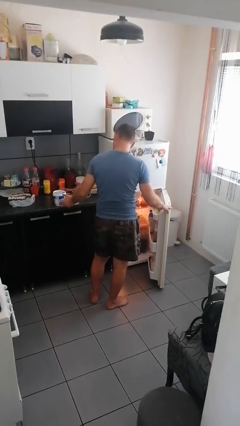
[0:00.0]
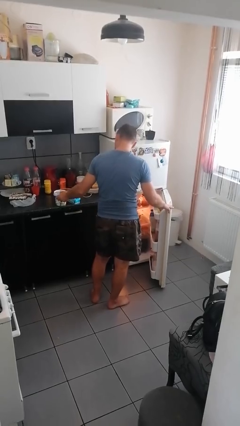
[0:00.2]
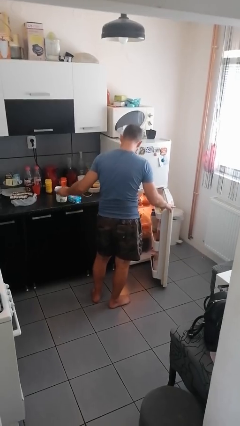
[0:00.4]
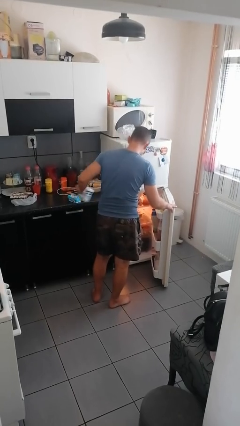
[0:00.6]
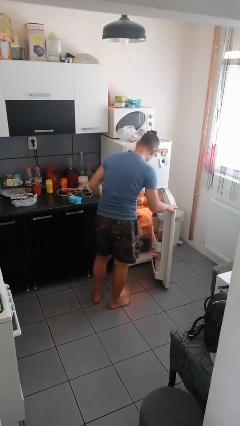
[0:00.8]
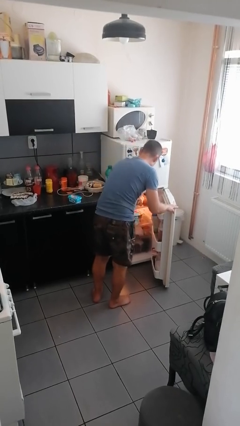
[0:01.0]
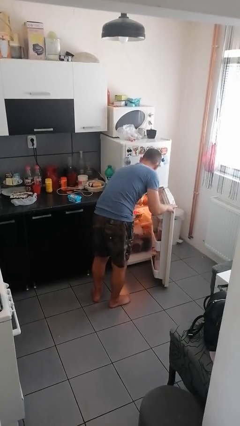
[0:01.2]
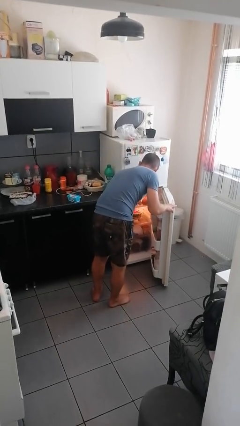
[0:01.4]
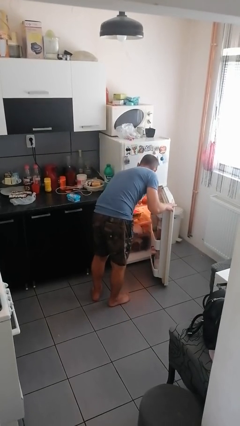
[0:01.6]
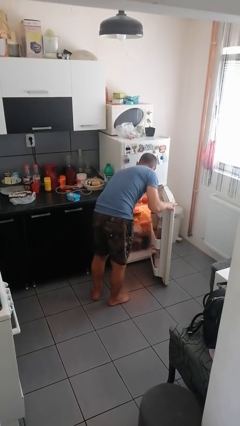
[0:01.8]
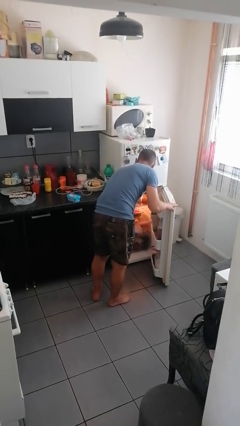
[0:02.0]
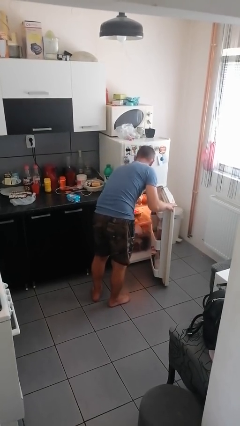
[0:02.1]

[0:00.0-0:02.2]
person loads groceries into refrigerator

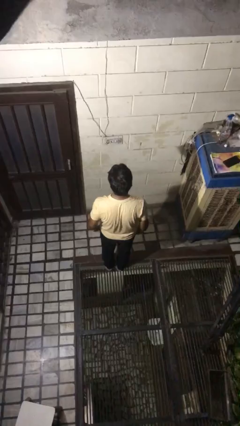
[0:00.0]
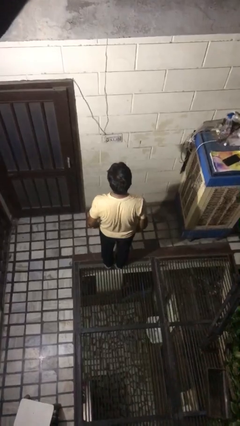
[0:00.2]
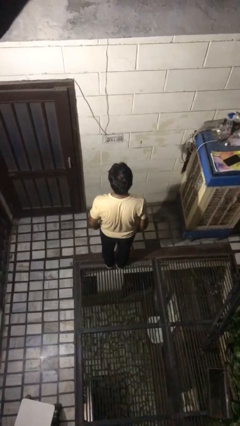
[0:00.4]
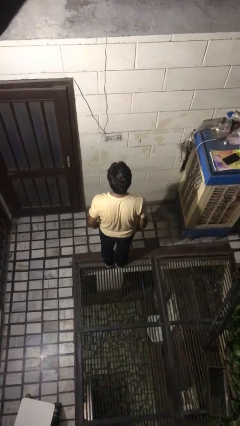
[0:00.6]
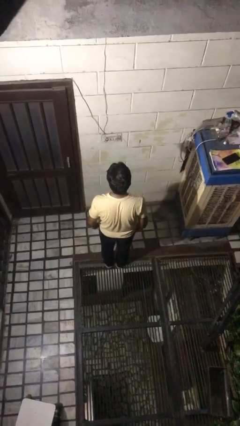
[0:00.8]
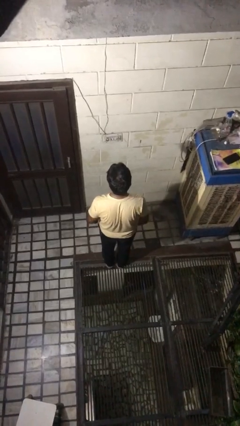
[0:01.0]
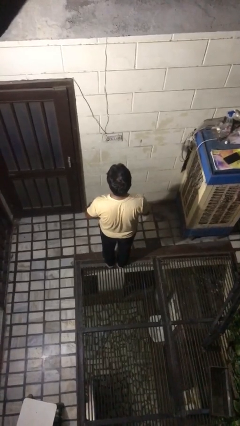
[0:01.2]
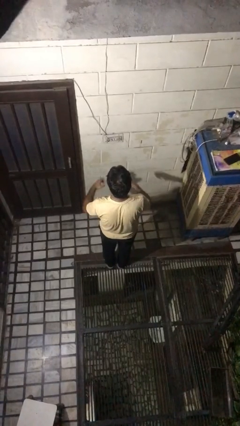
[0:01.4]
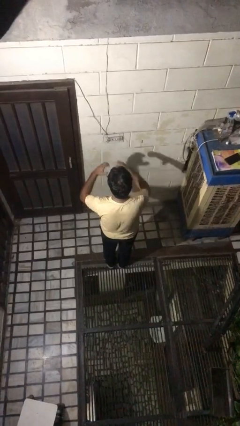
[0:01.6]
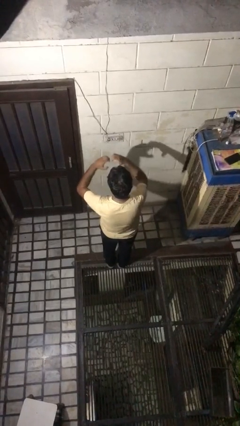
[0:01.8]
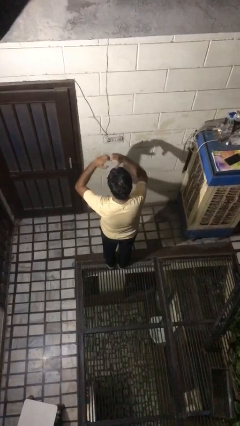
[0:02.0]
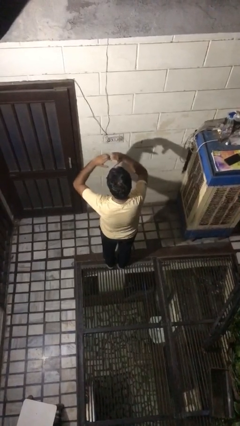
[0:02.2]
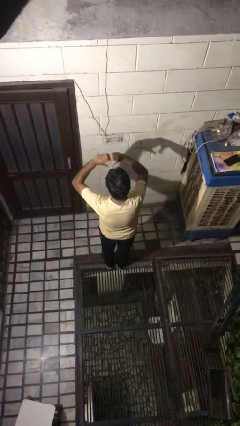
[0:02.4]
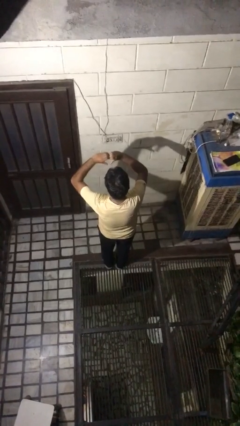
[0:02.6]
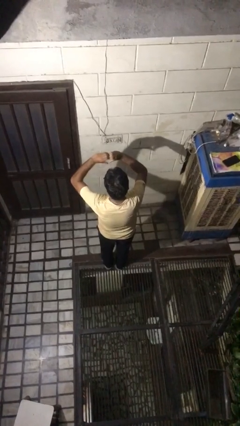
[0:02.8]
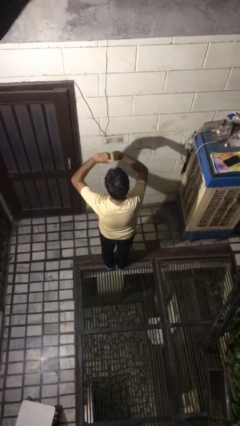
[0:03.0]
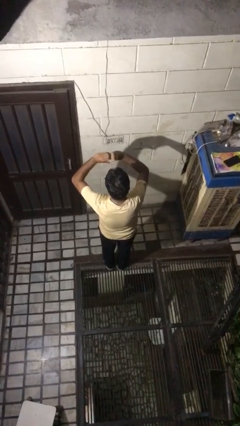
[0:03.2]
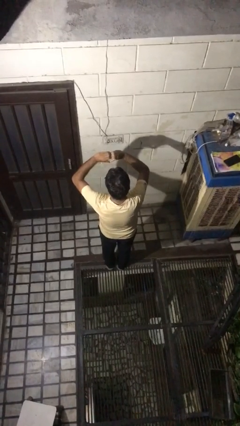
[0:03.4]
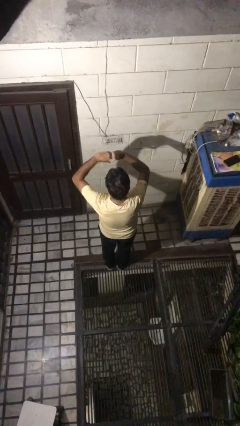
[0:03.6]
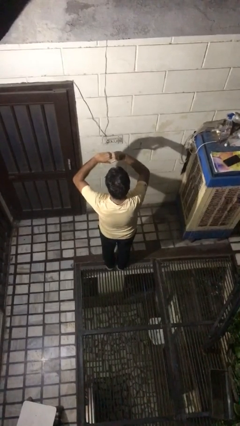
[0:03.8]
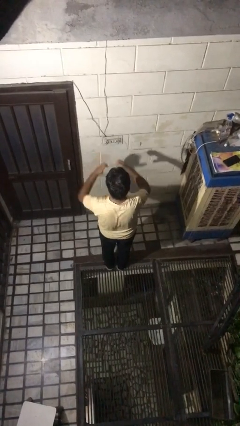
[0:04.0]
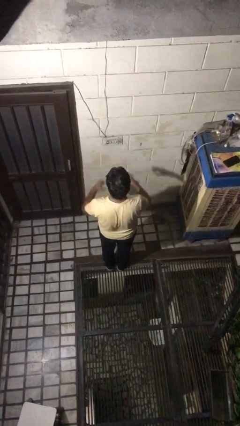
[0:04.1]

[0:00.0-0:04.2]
person gestures heart

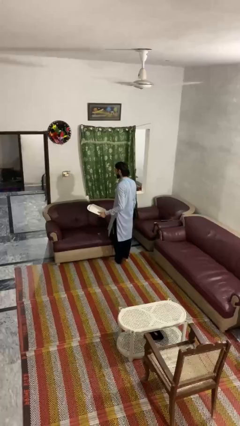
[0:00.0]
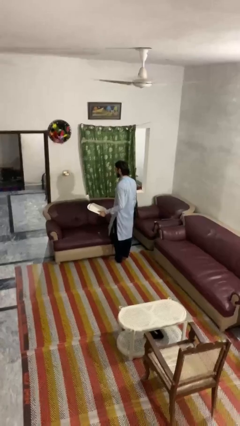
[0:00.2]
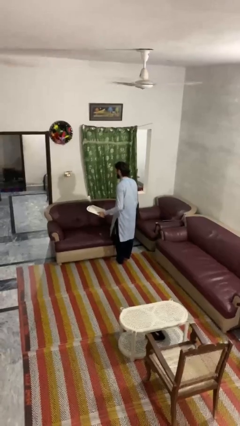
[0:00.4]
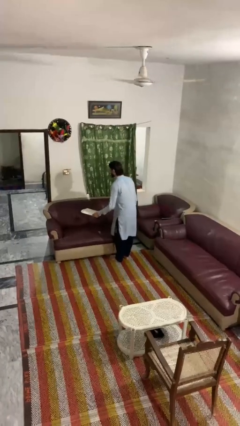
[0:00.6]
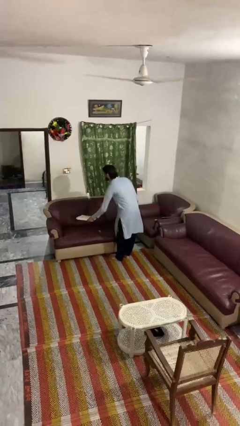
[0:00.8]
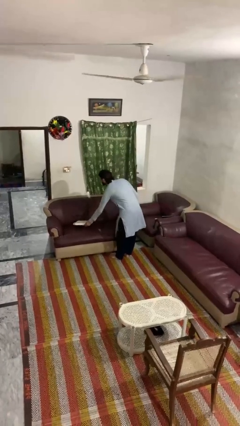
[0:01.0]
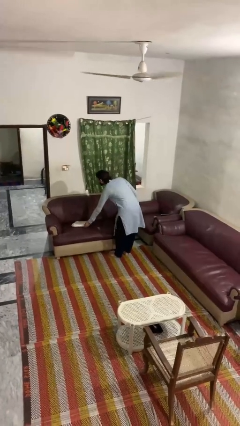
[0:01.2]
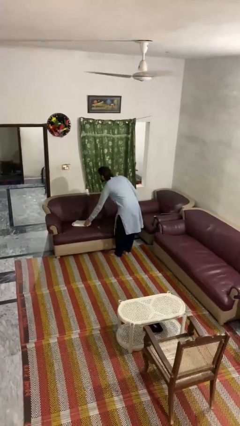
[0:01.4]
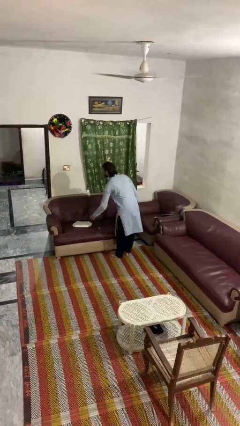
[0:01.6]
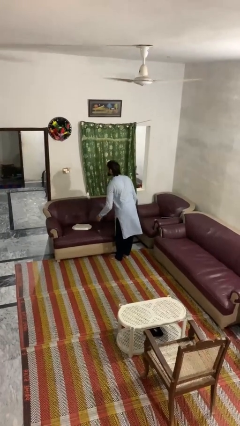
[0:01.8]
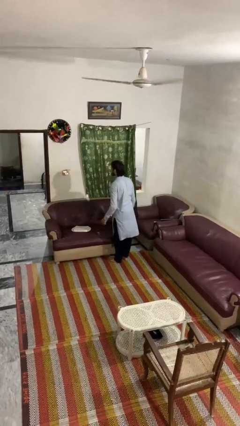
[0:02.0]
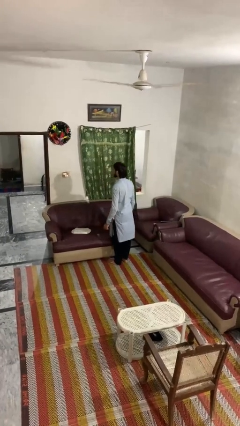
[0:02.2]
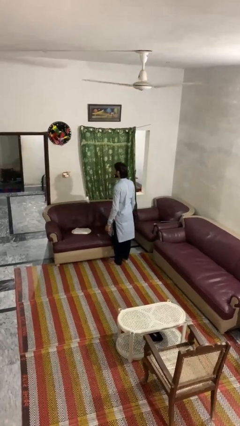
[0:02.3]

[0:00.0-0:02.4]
person puts down object on couch

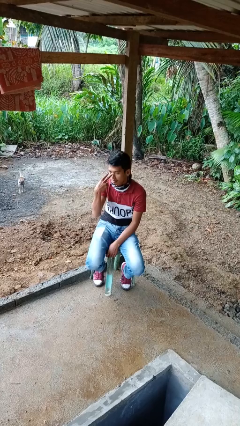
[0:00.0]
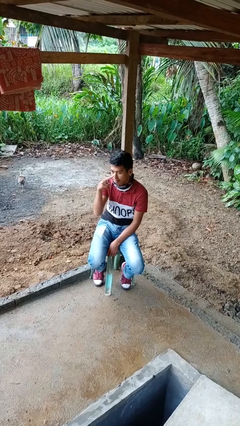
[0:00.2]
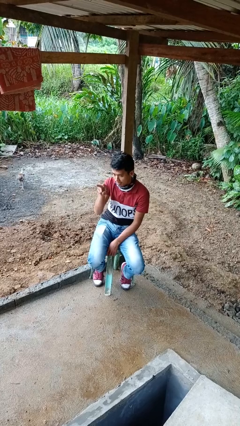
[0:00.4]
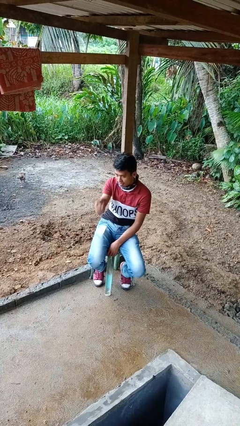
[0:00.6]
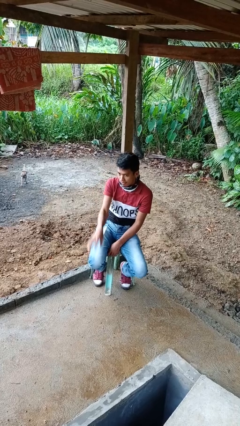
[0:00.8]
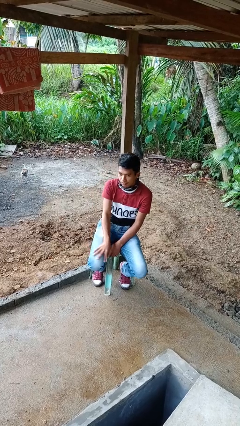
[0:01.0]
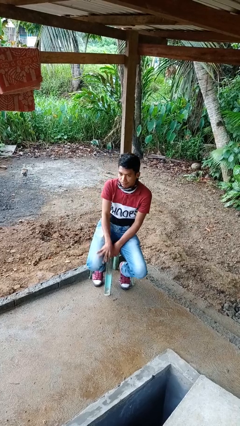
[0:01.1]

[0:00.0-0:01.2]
person gestures watch closely

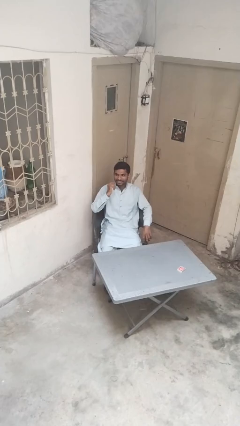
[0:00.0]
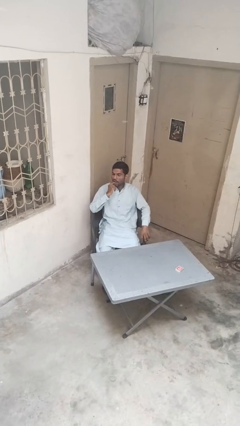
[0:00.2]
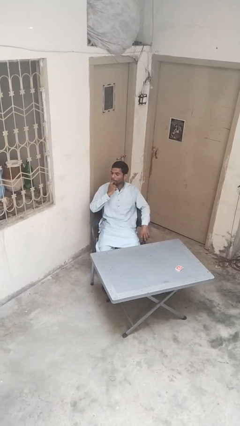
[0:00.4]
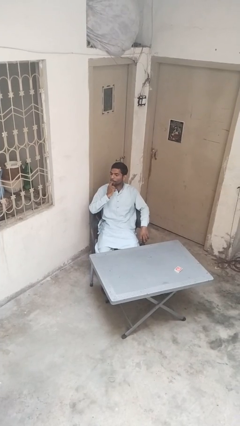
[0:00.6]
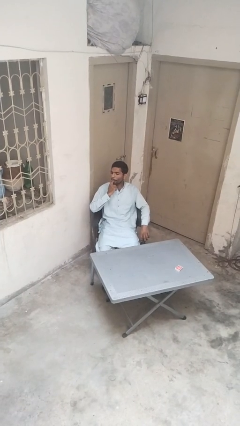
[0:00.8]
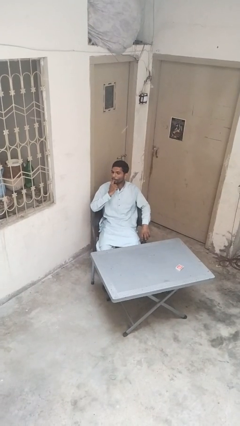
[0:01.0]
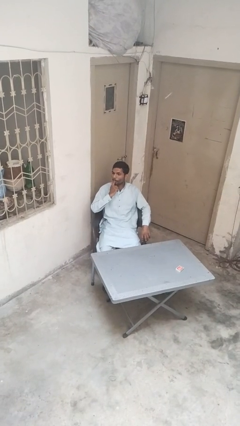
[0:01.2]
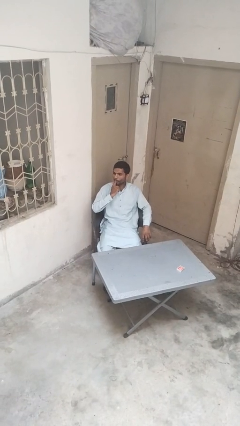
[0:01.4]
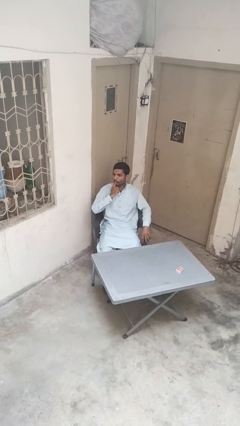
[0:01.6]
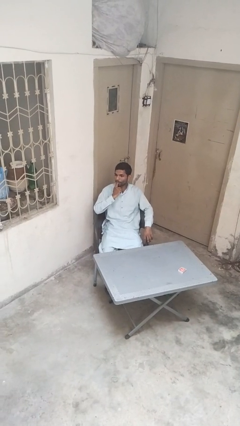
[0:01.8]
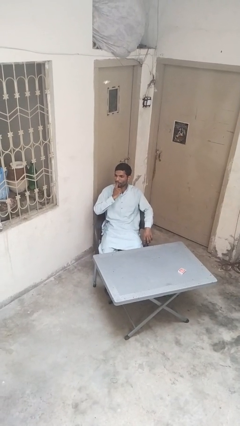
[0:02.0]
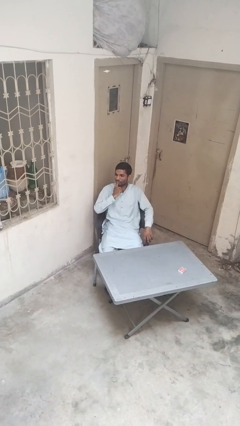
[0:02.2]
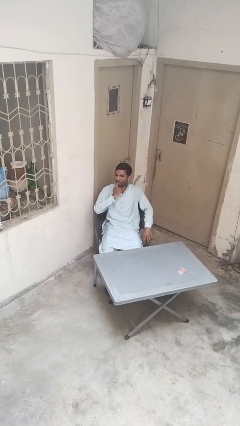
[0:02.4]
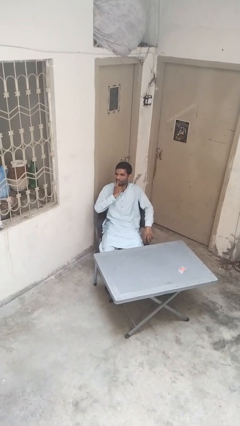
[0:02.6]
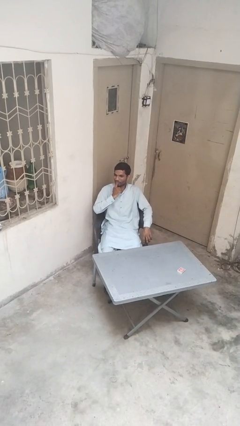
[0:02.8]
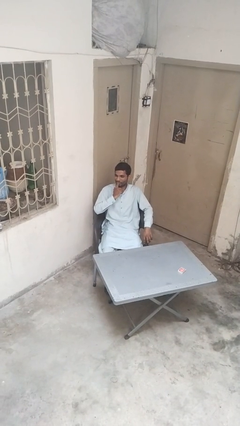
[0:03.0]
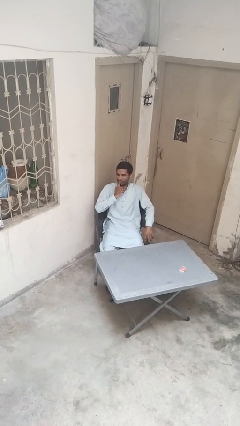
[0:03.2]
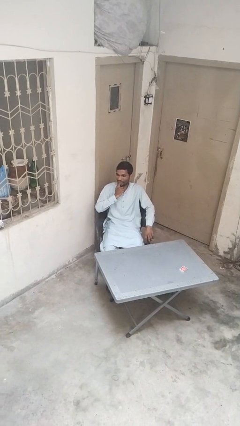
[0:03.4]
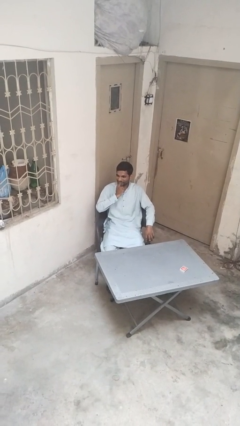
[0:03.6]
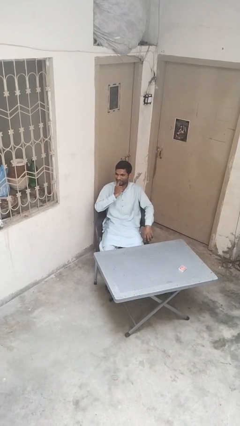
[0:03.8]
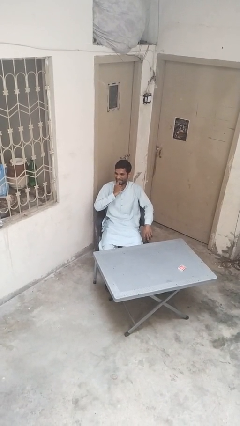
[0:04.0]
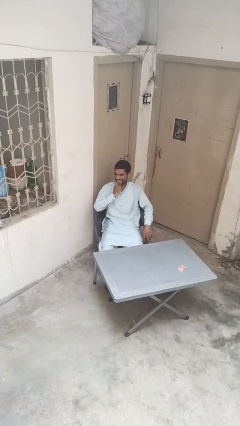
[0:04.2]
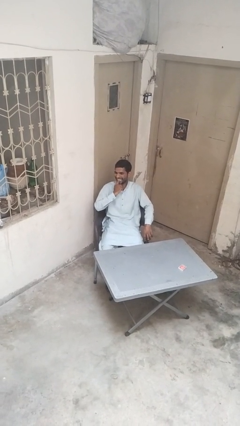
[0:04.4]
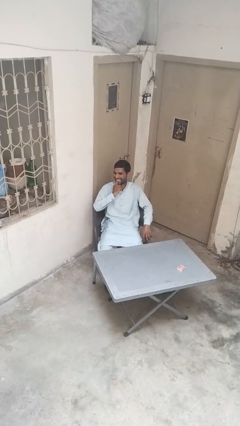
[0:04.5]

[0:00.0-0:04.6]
person licks fingers

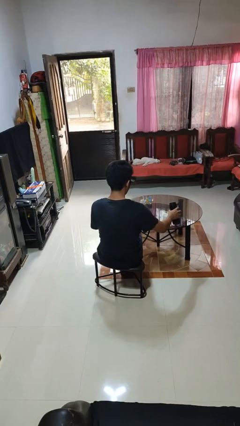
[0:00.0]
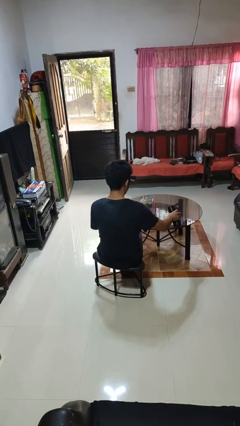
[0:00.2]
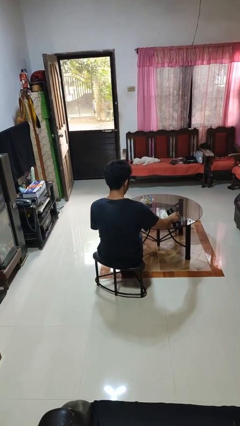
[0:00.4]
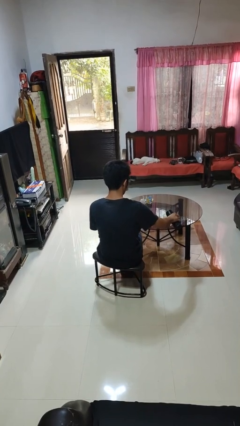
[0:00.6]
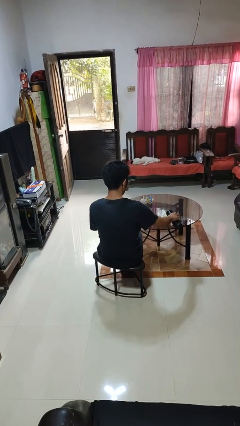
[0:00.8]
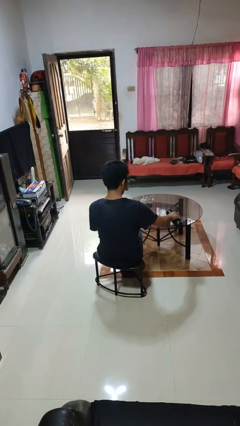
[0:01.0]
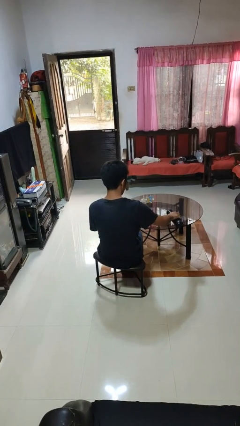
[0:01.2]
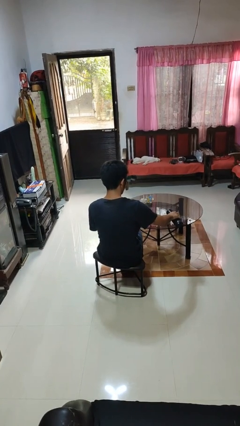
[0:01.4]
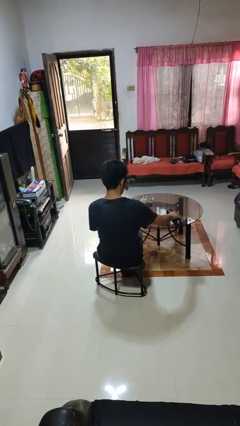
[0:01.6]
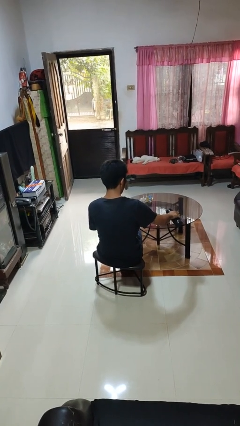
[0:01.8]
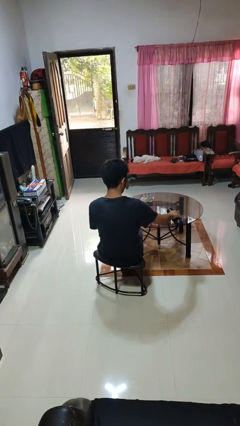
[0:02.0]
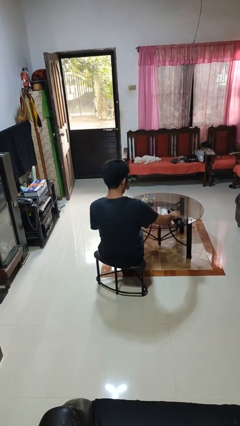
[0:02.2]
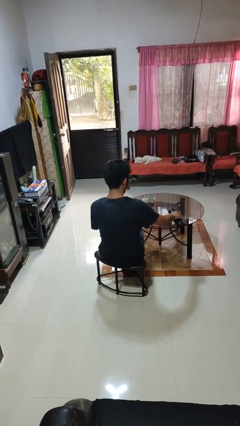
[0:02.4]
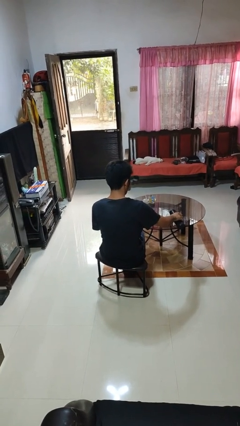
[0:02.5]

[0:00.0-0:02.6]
person pours liquid into cup

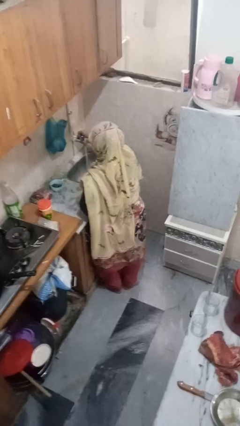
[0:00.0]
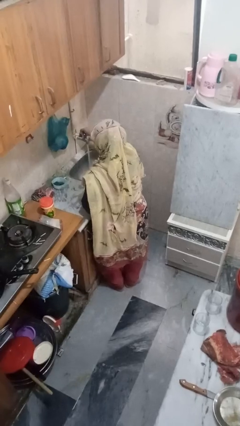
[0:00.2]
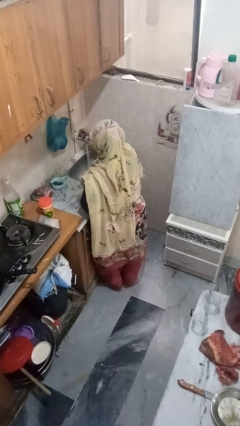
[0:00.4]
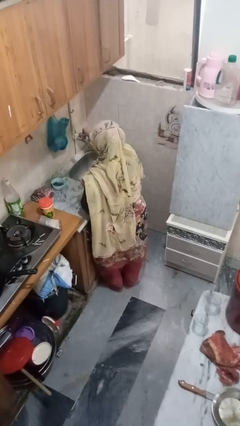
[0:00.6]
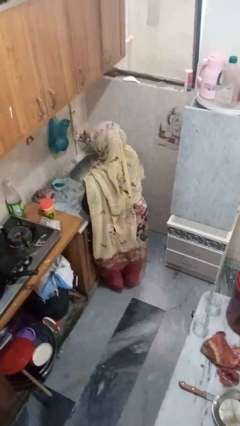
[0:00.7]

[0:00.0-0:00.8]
person turns off faucet
